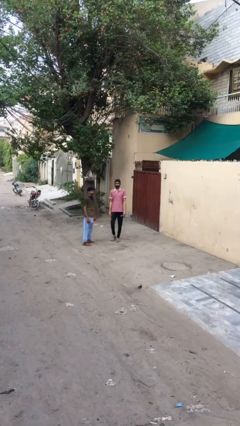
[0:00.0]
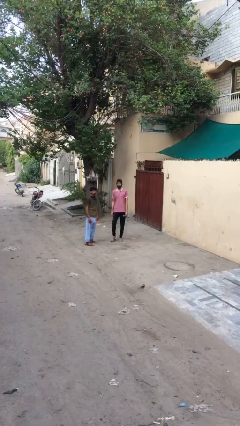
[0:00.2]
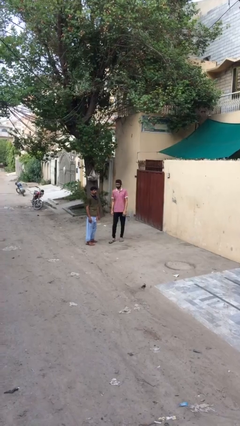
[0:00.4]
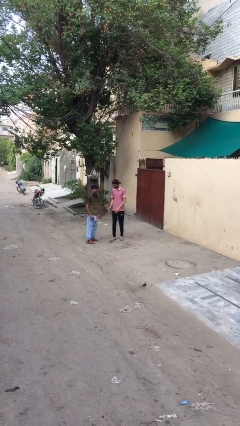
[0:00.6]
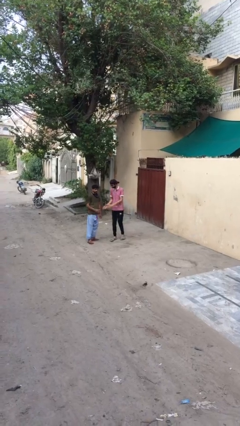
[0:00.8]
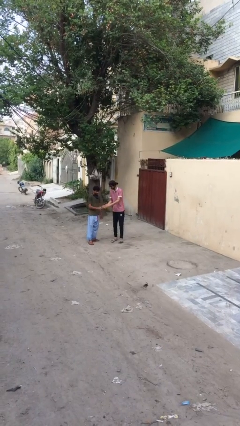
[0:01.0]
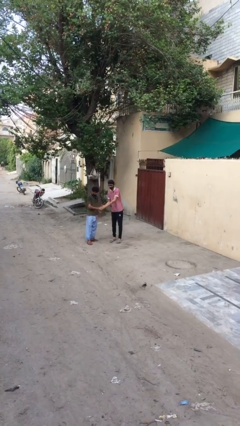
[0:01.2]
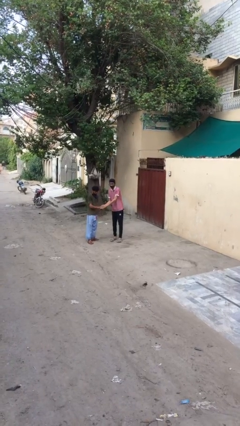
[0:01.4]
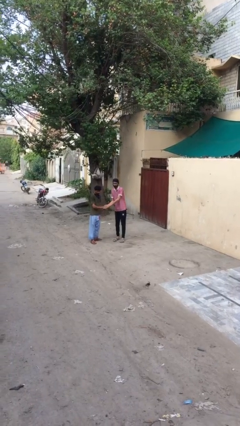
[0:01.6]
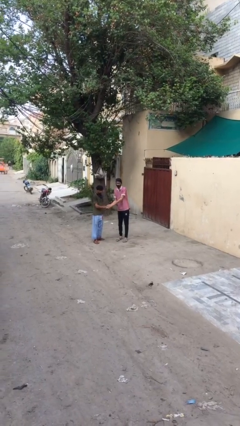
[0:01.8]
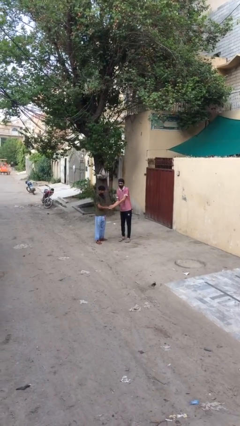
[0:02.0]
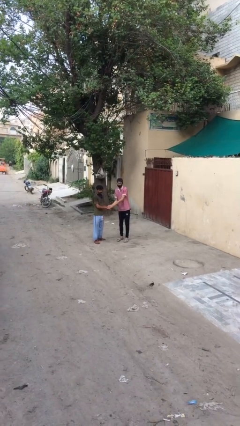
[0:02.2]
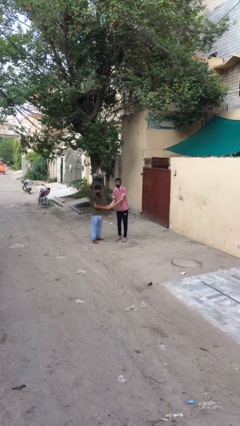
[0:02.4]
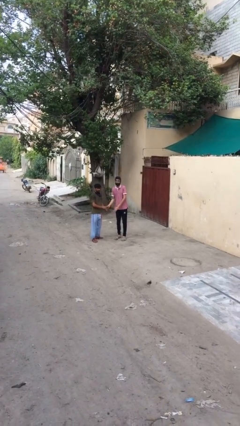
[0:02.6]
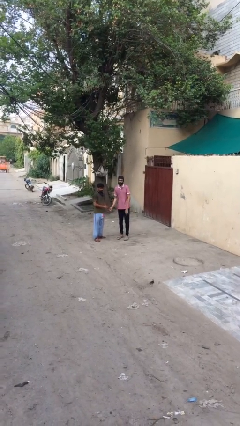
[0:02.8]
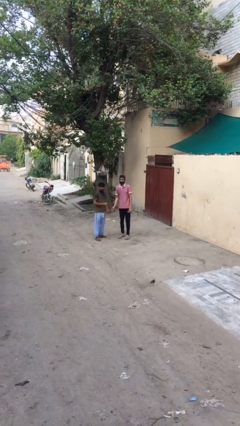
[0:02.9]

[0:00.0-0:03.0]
person shakes hand

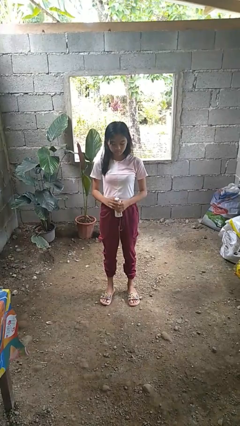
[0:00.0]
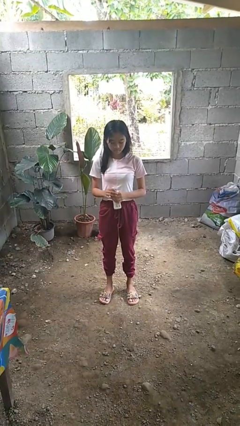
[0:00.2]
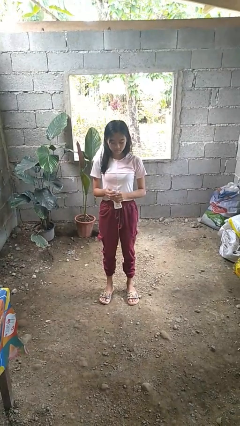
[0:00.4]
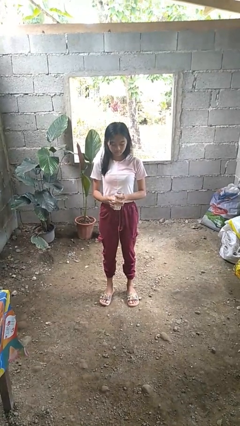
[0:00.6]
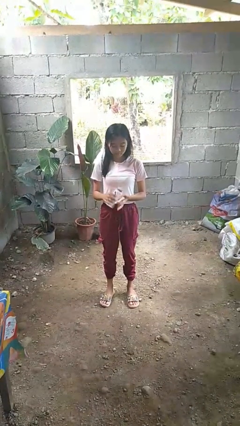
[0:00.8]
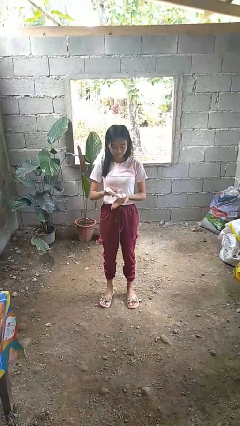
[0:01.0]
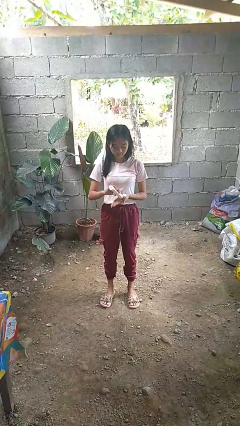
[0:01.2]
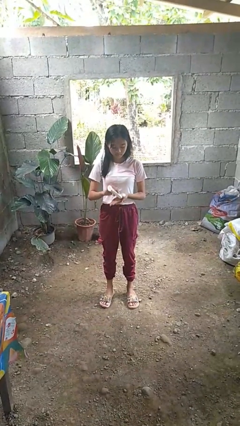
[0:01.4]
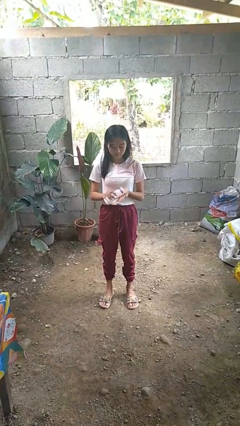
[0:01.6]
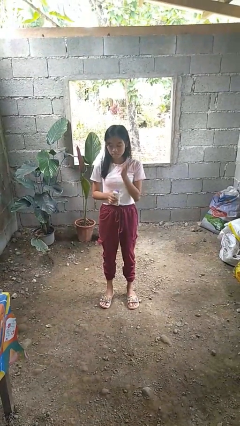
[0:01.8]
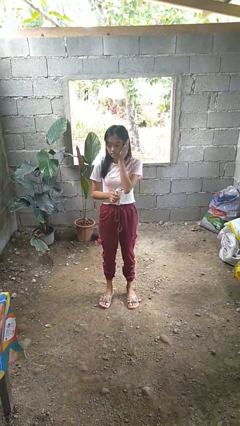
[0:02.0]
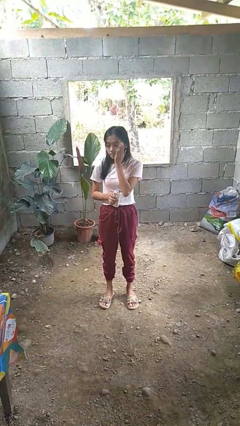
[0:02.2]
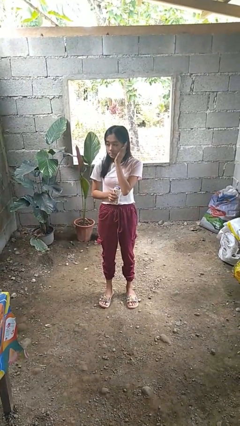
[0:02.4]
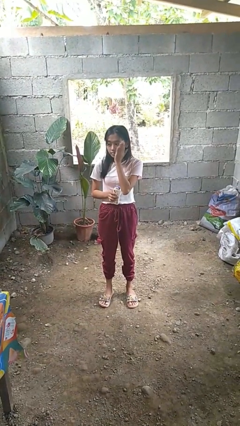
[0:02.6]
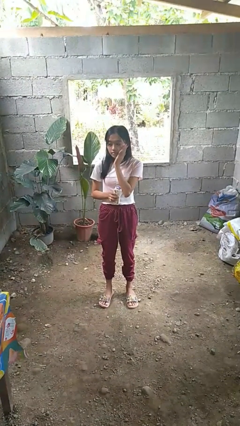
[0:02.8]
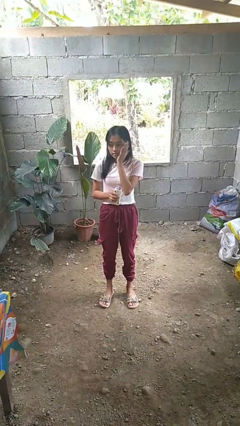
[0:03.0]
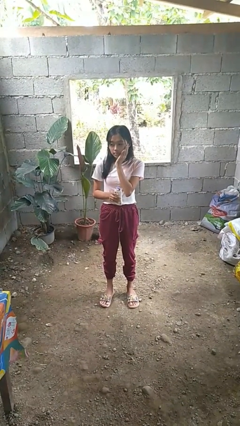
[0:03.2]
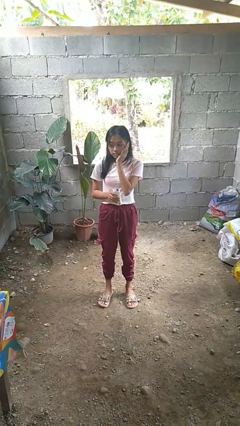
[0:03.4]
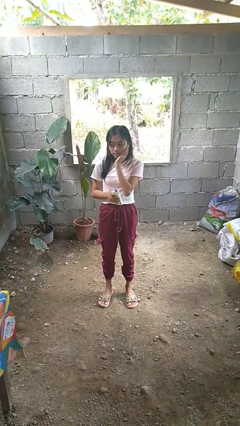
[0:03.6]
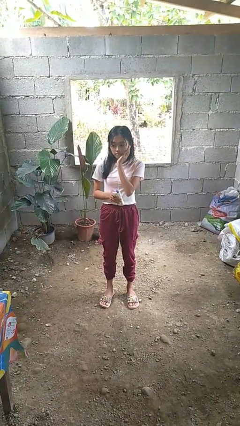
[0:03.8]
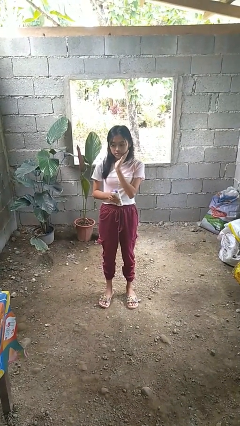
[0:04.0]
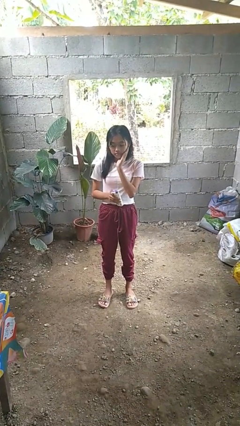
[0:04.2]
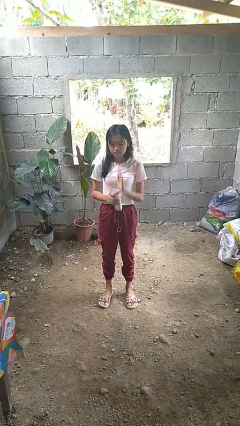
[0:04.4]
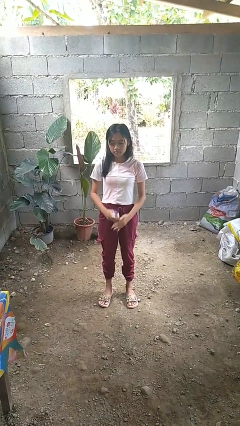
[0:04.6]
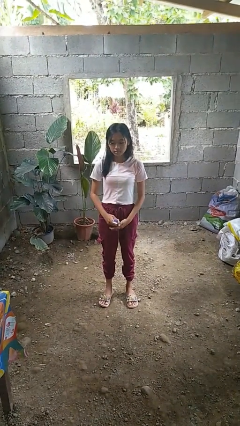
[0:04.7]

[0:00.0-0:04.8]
person applies sunscreen

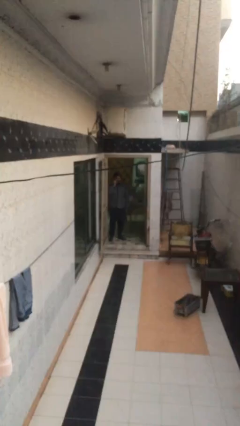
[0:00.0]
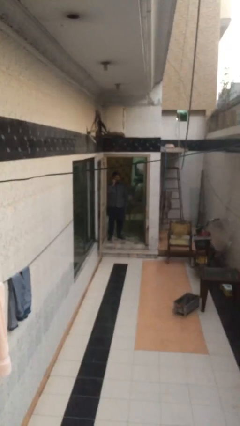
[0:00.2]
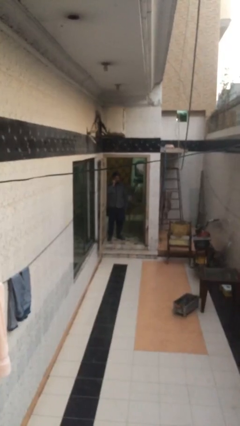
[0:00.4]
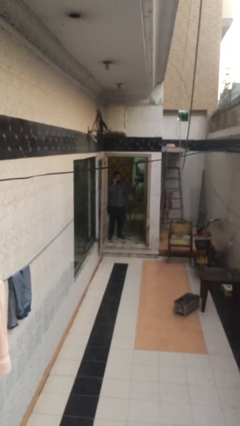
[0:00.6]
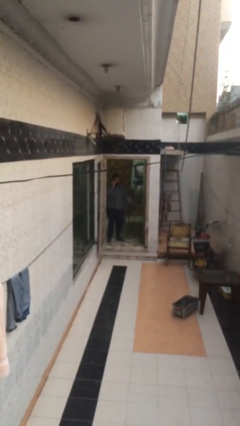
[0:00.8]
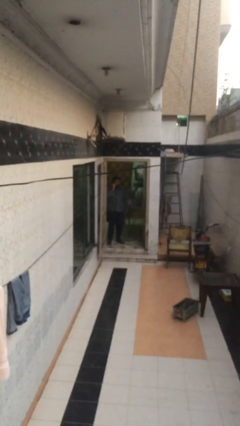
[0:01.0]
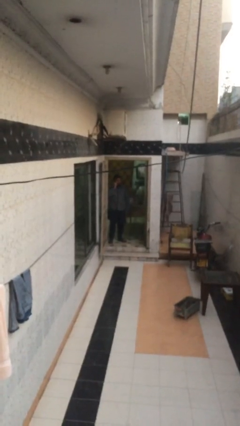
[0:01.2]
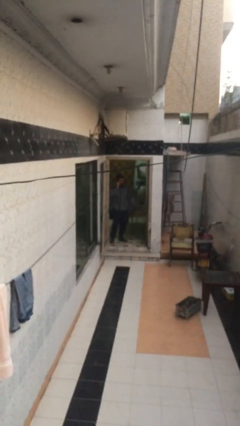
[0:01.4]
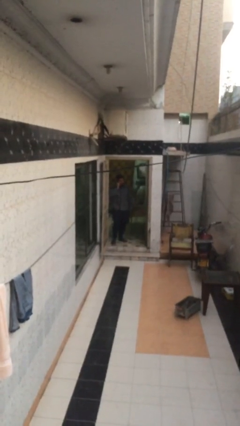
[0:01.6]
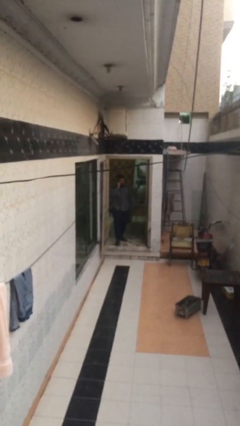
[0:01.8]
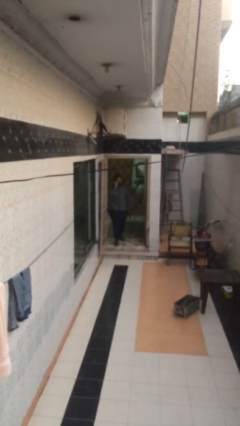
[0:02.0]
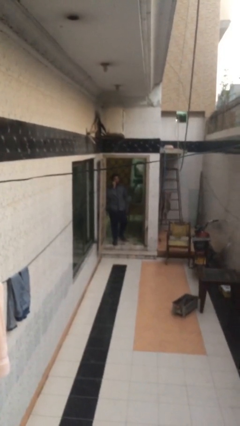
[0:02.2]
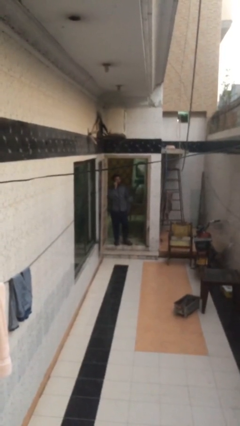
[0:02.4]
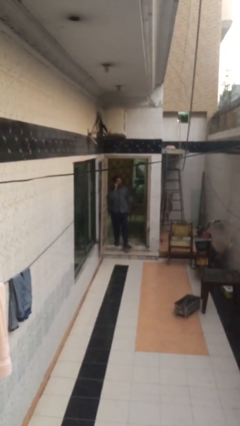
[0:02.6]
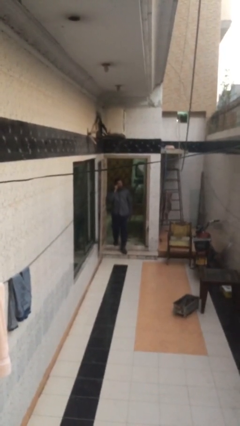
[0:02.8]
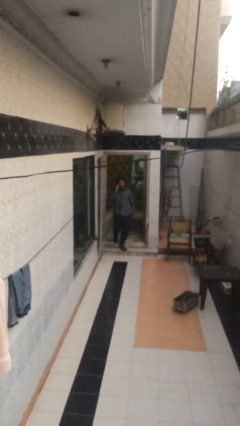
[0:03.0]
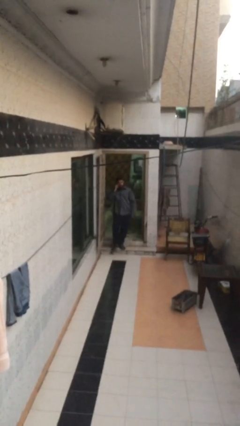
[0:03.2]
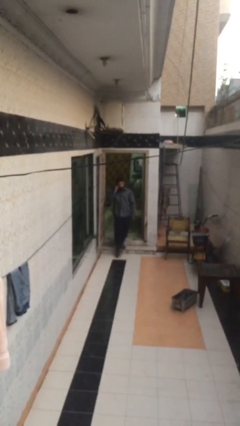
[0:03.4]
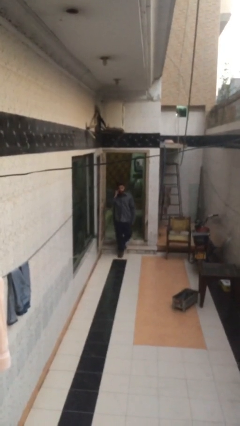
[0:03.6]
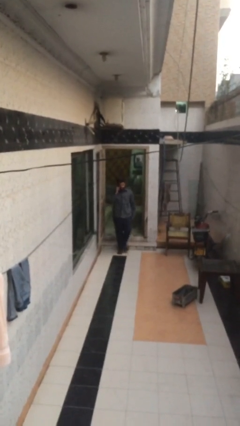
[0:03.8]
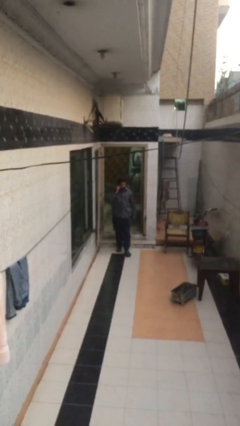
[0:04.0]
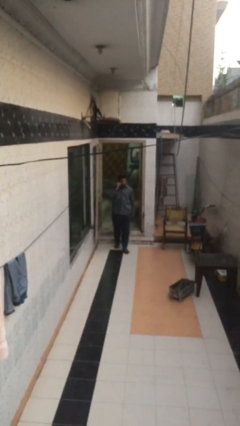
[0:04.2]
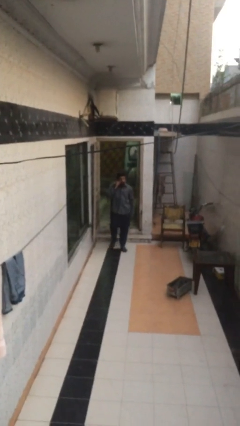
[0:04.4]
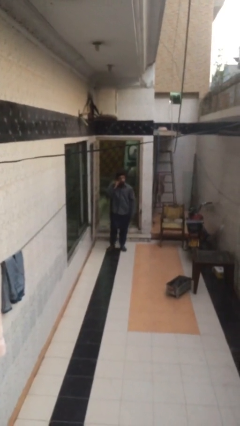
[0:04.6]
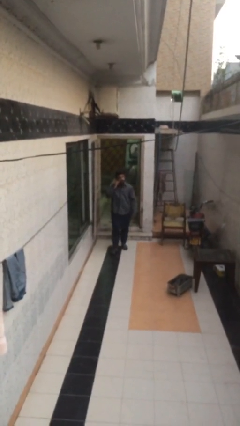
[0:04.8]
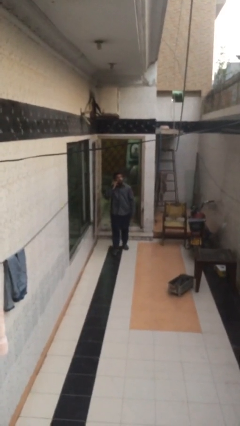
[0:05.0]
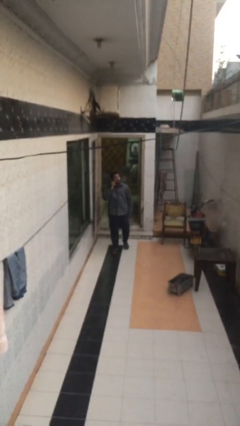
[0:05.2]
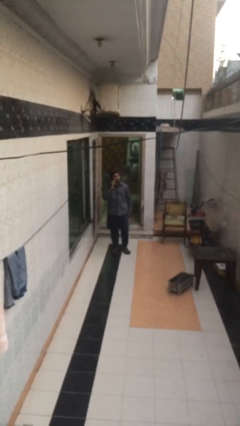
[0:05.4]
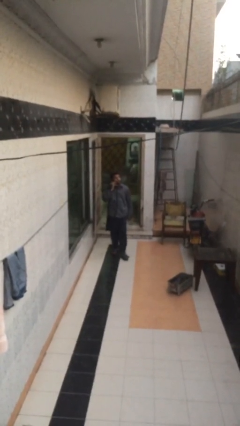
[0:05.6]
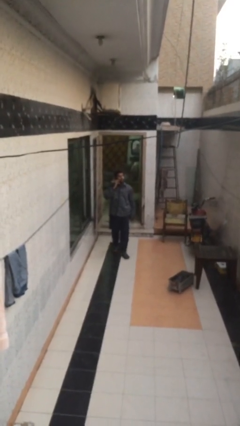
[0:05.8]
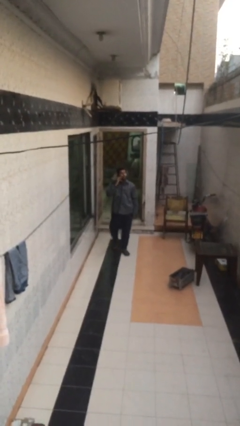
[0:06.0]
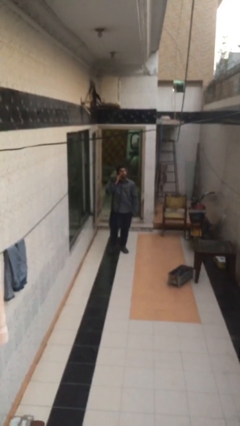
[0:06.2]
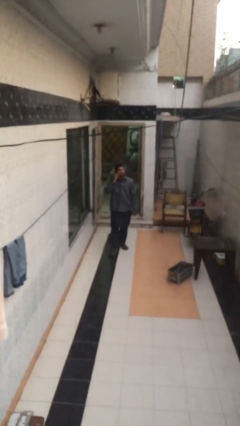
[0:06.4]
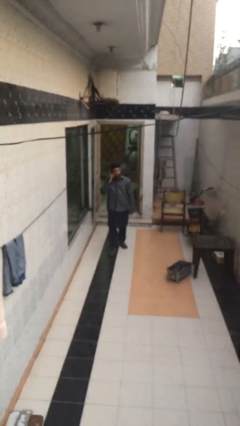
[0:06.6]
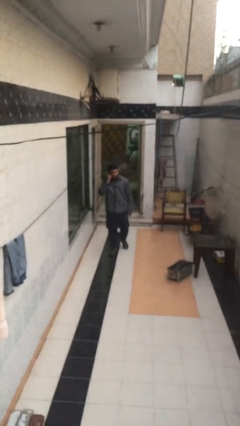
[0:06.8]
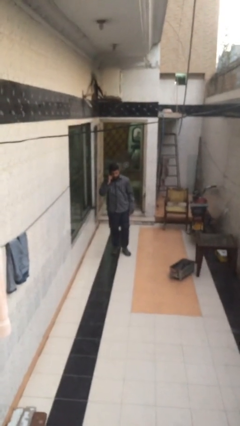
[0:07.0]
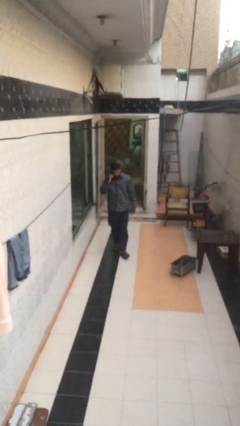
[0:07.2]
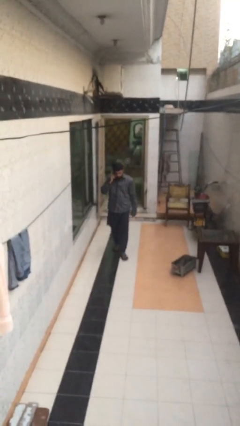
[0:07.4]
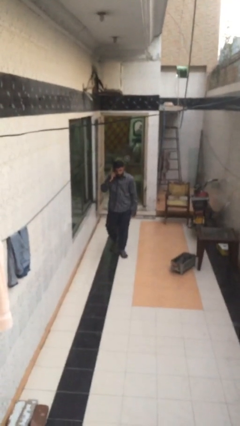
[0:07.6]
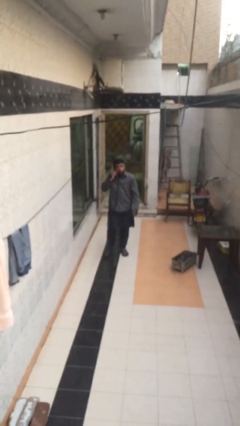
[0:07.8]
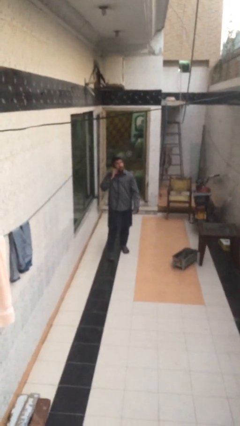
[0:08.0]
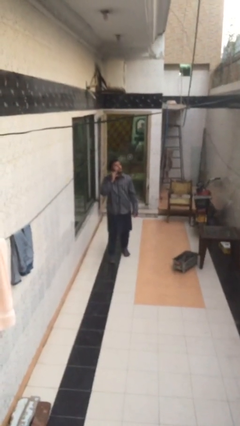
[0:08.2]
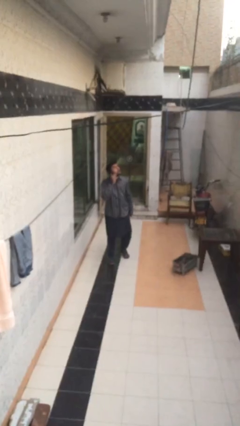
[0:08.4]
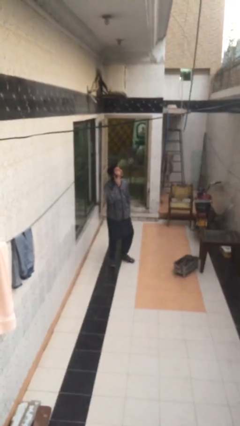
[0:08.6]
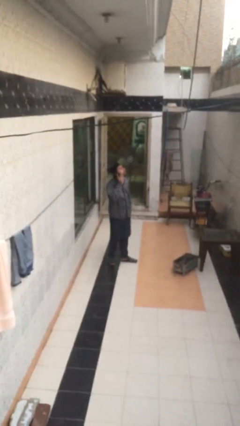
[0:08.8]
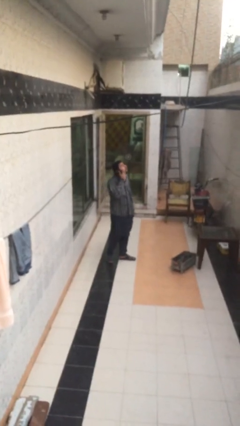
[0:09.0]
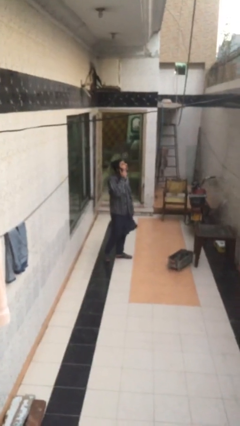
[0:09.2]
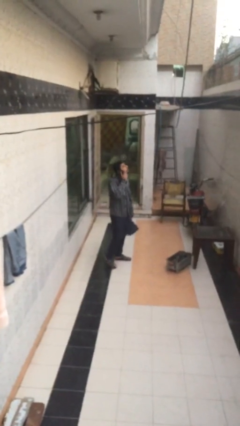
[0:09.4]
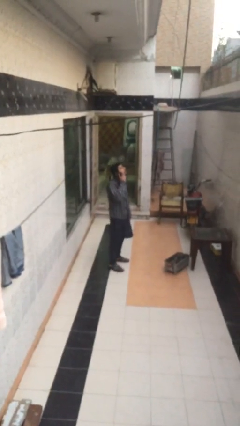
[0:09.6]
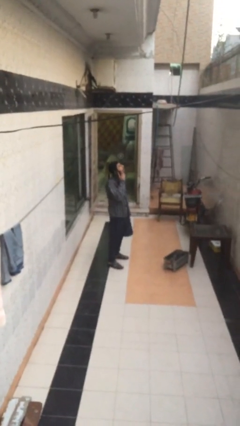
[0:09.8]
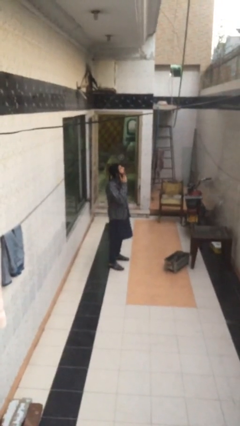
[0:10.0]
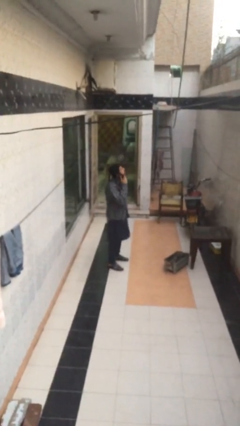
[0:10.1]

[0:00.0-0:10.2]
person enters scene through structure
